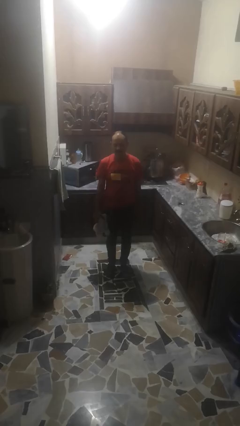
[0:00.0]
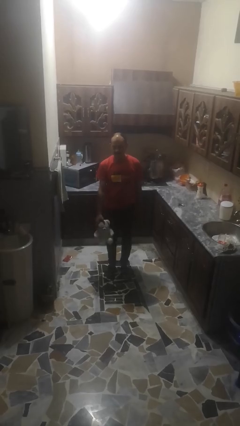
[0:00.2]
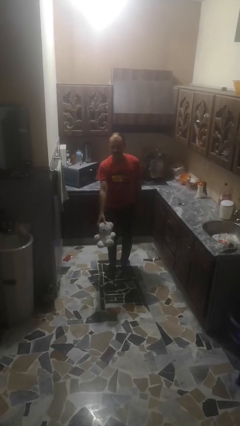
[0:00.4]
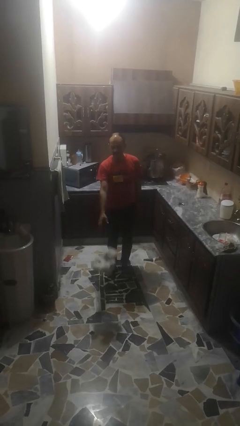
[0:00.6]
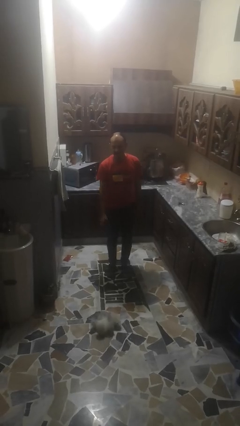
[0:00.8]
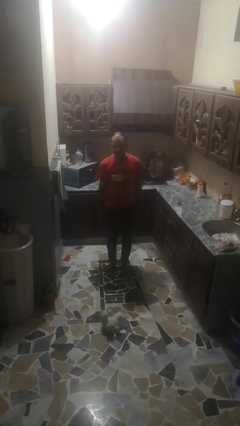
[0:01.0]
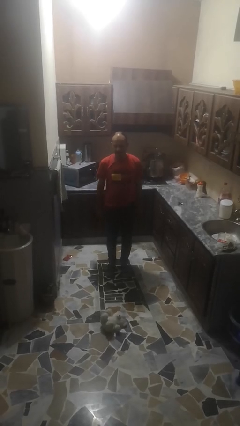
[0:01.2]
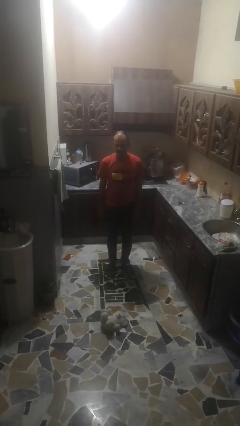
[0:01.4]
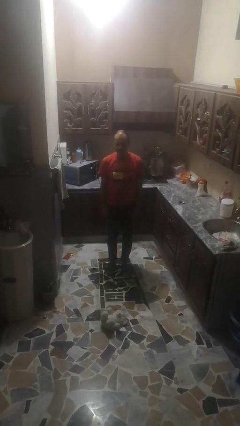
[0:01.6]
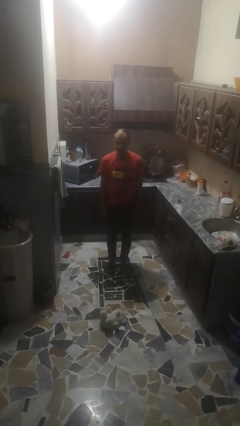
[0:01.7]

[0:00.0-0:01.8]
person throws object to ground

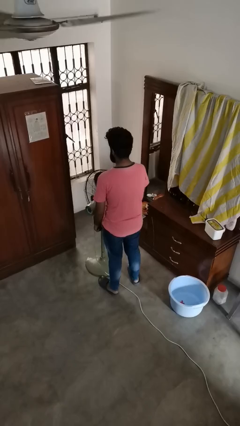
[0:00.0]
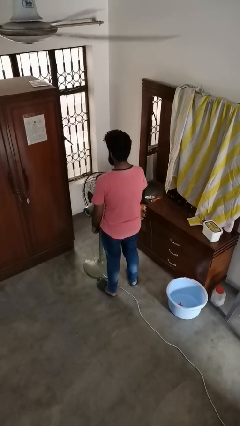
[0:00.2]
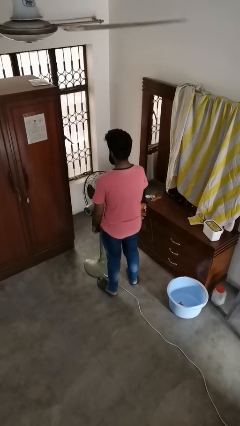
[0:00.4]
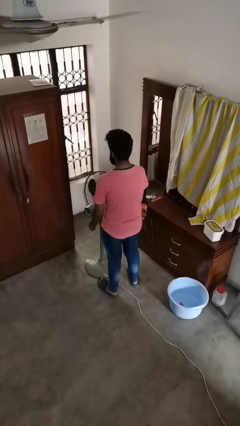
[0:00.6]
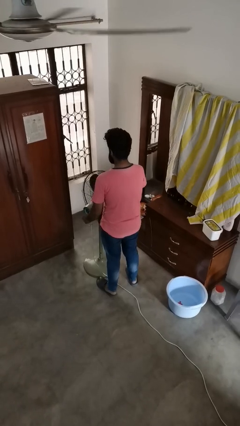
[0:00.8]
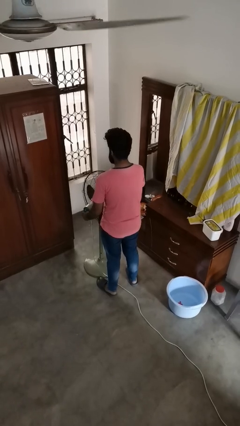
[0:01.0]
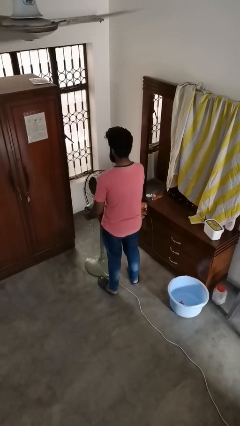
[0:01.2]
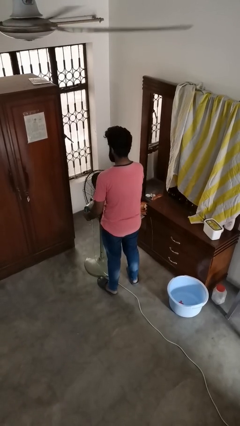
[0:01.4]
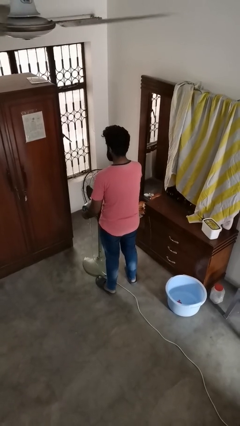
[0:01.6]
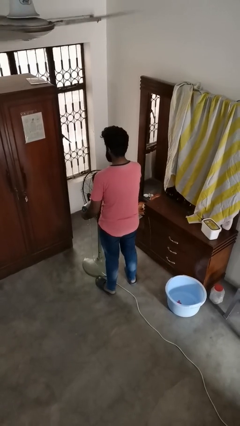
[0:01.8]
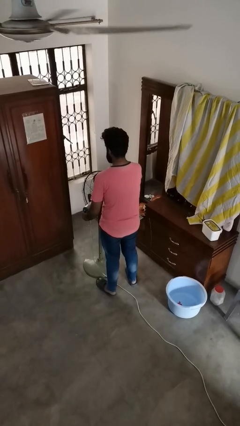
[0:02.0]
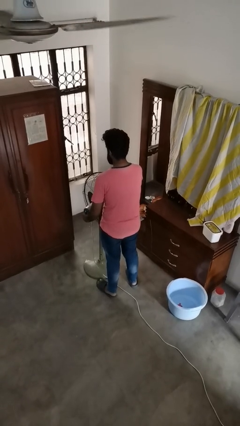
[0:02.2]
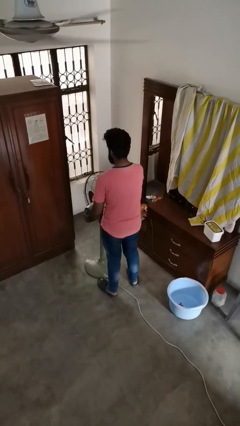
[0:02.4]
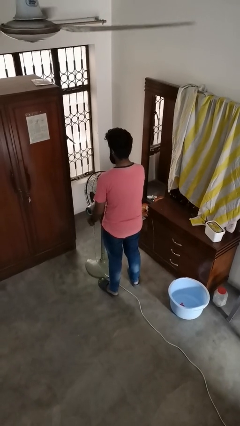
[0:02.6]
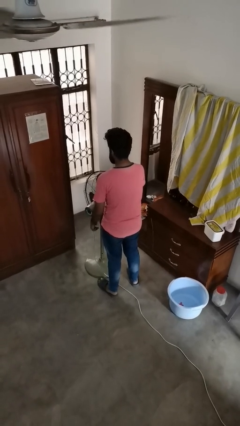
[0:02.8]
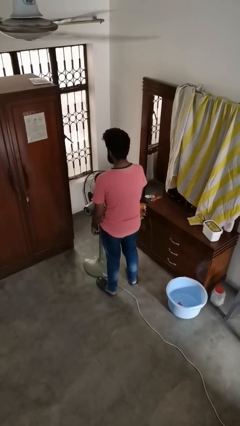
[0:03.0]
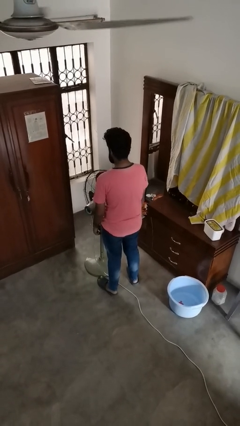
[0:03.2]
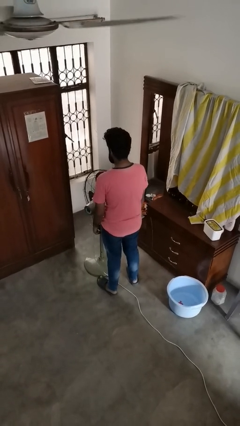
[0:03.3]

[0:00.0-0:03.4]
person turns off fan

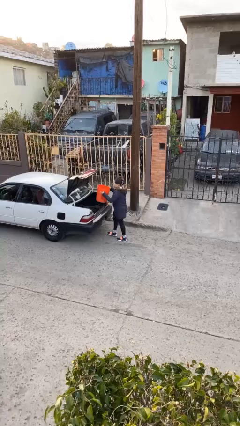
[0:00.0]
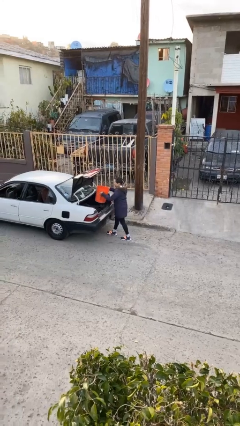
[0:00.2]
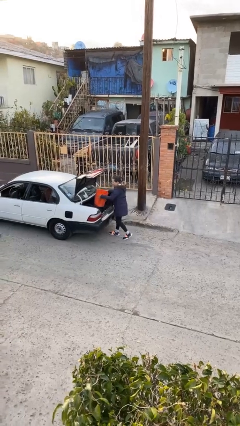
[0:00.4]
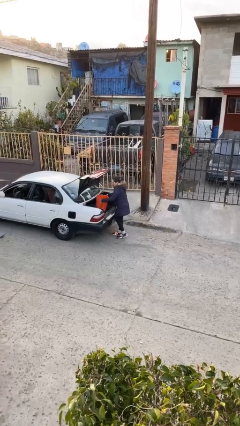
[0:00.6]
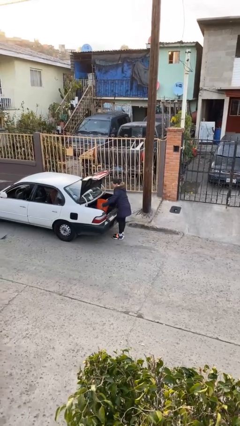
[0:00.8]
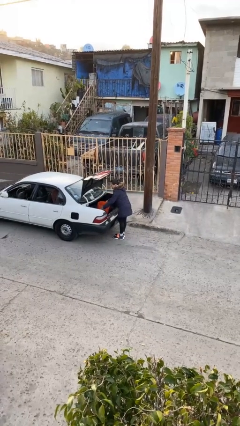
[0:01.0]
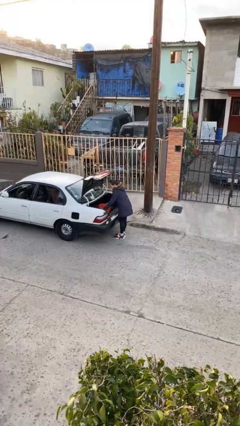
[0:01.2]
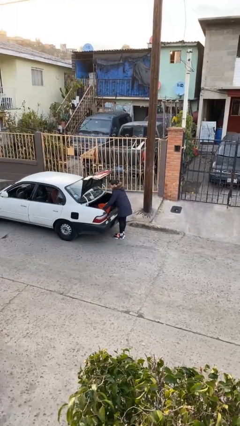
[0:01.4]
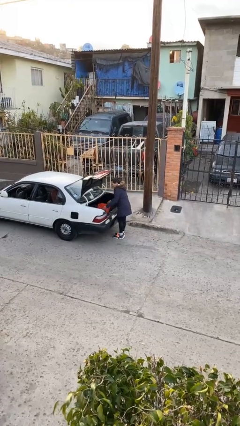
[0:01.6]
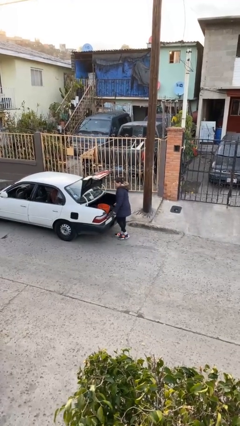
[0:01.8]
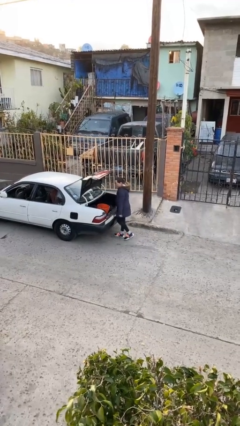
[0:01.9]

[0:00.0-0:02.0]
person loads car

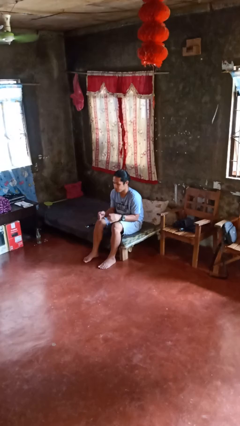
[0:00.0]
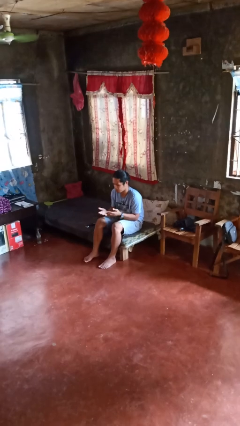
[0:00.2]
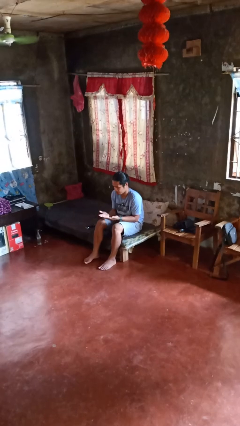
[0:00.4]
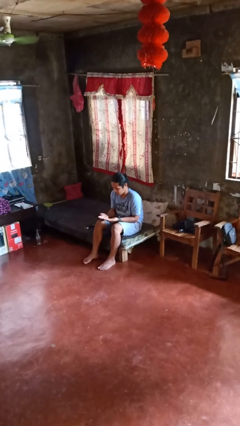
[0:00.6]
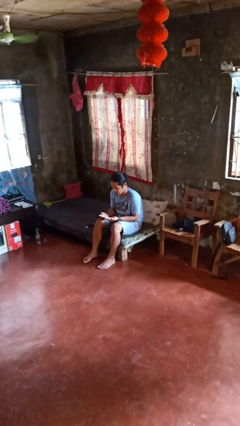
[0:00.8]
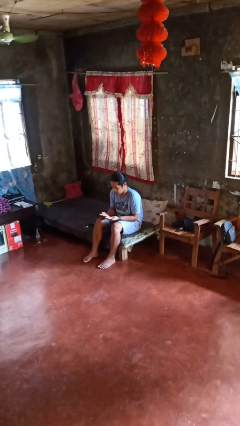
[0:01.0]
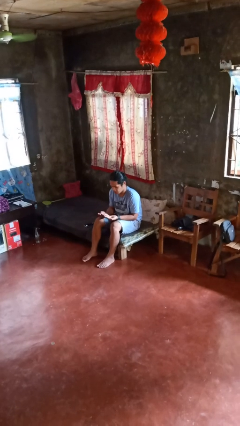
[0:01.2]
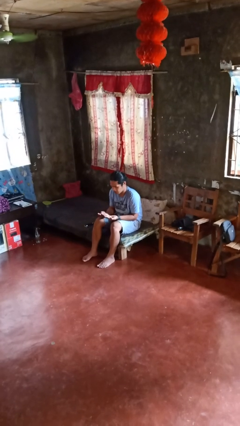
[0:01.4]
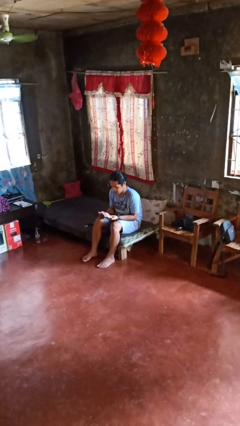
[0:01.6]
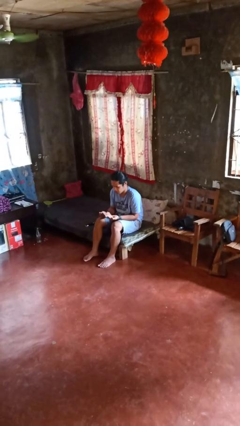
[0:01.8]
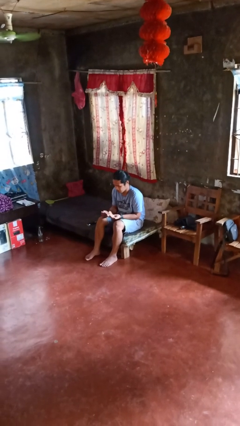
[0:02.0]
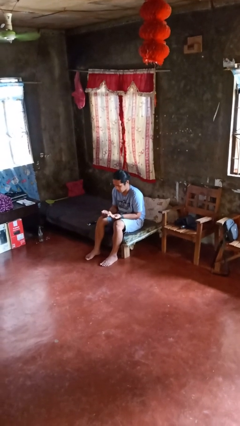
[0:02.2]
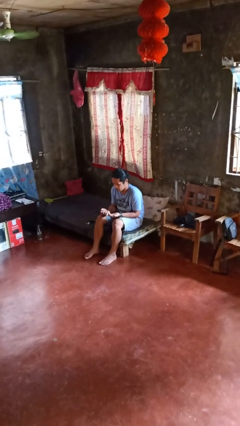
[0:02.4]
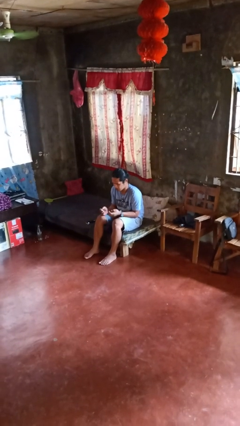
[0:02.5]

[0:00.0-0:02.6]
person looks at hands in lap

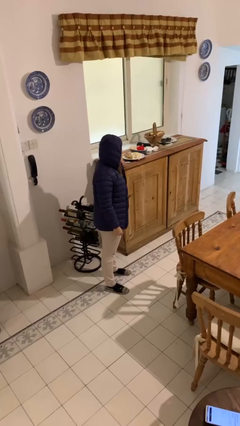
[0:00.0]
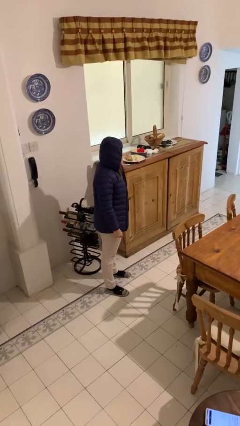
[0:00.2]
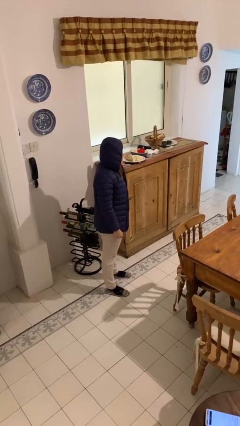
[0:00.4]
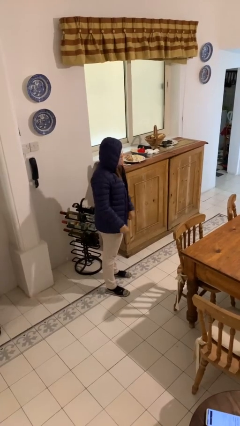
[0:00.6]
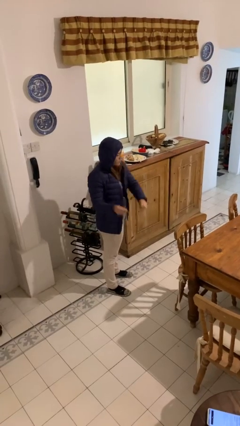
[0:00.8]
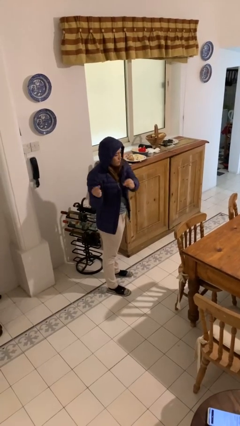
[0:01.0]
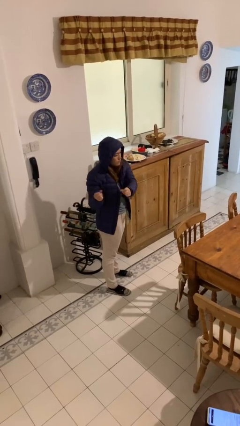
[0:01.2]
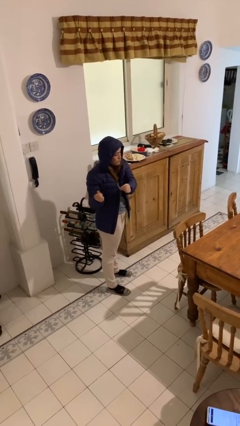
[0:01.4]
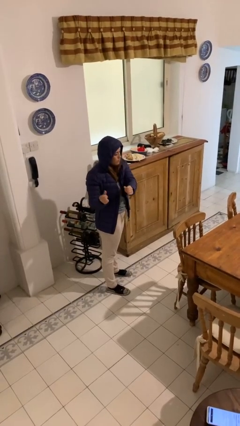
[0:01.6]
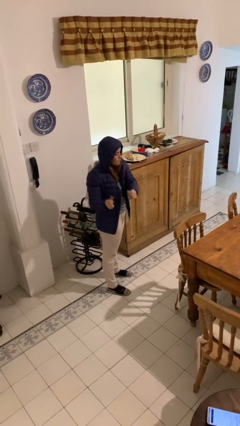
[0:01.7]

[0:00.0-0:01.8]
person snaps fingers

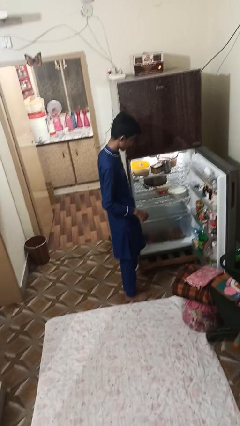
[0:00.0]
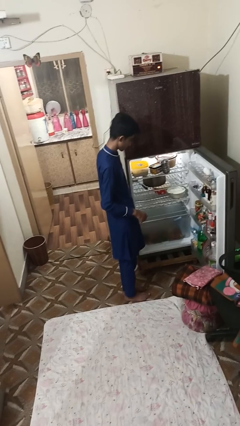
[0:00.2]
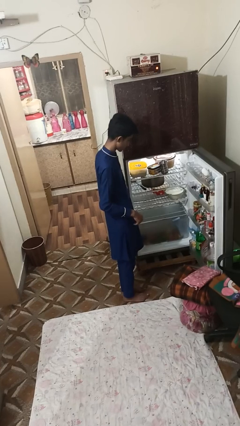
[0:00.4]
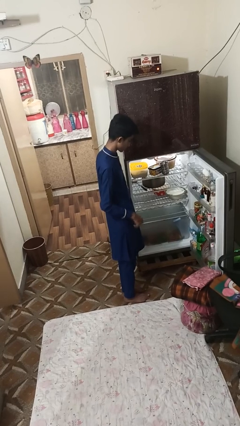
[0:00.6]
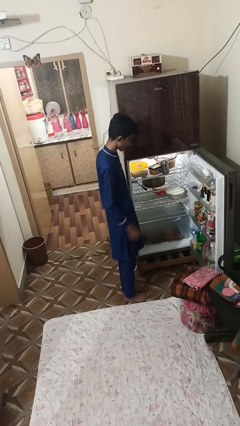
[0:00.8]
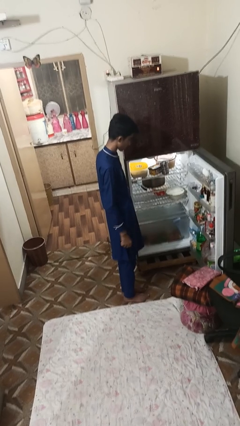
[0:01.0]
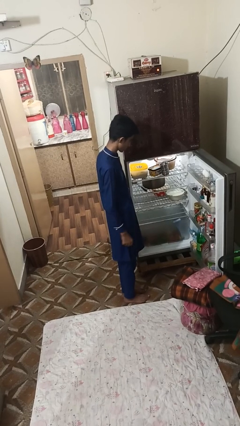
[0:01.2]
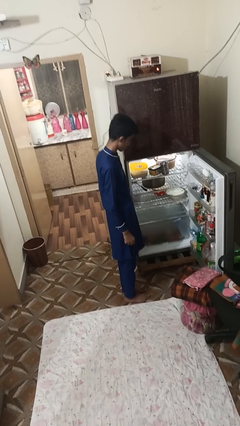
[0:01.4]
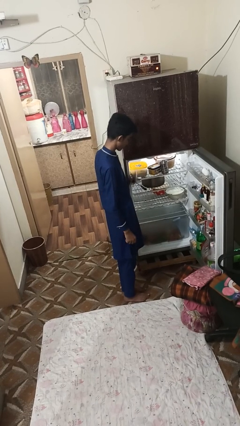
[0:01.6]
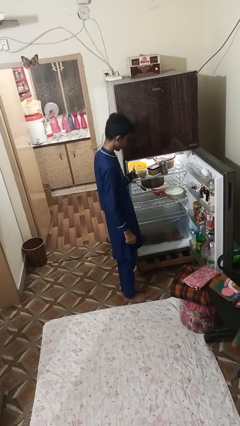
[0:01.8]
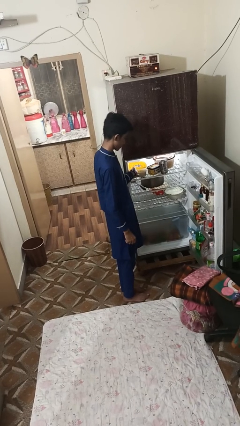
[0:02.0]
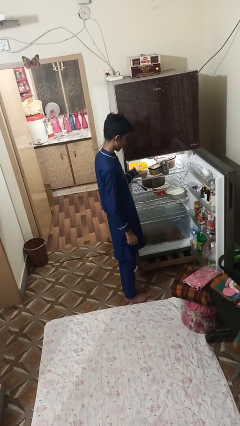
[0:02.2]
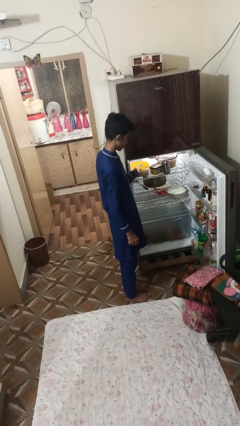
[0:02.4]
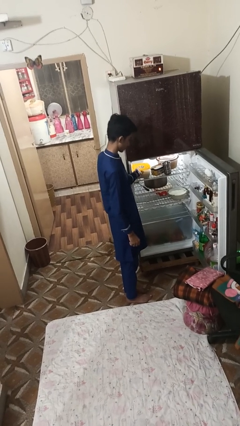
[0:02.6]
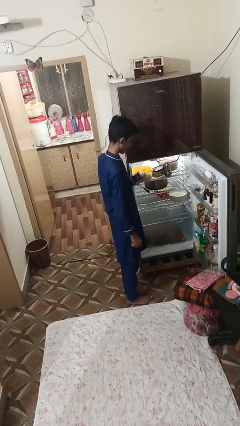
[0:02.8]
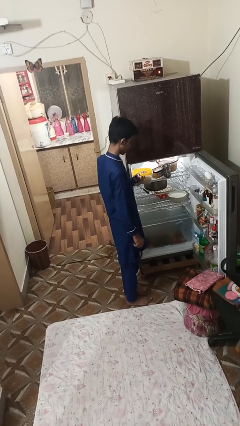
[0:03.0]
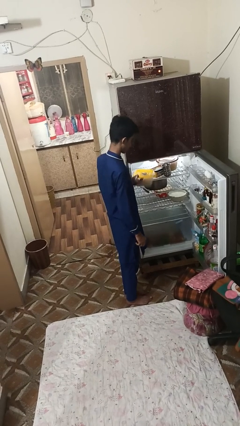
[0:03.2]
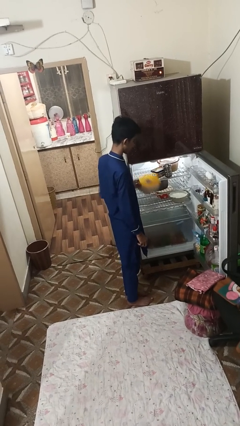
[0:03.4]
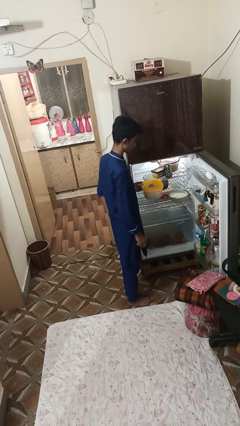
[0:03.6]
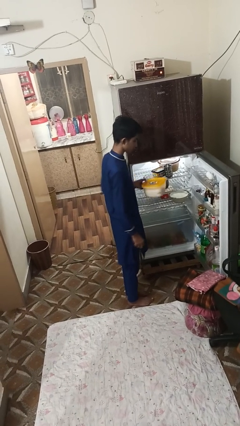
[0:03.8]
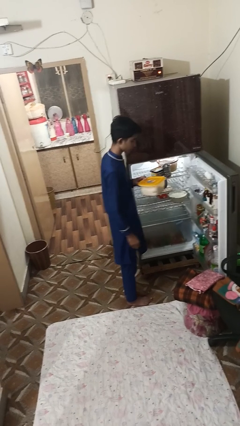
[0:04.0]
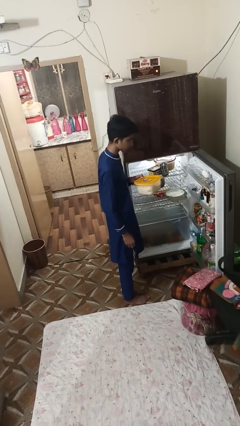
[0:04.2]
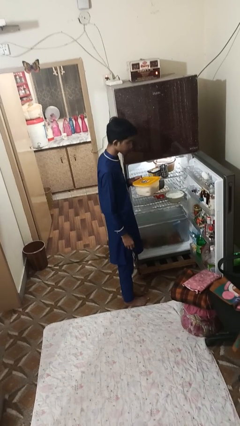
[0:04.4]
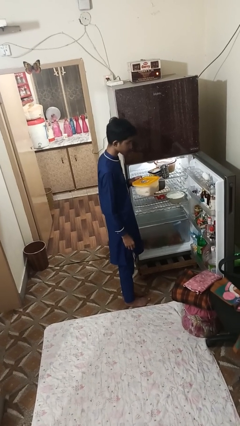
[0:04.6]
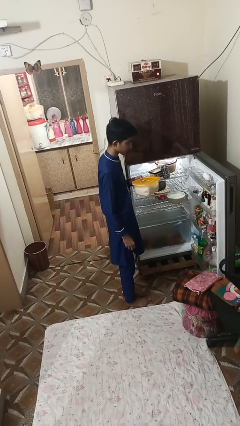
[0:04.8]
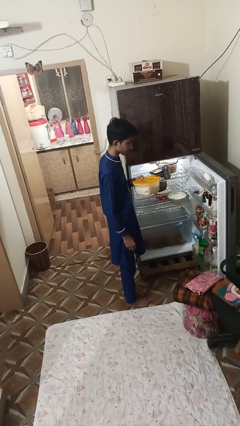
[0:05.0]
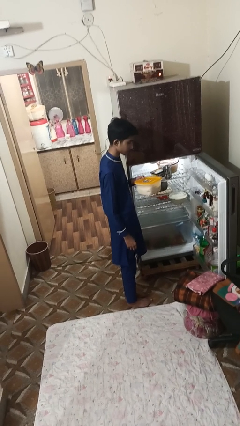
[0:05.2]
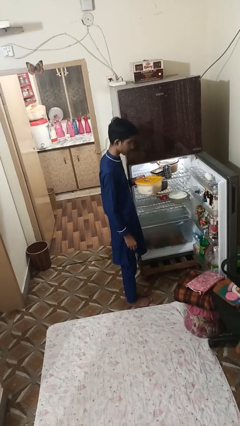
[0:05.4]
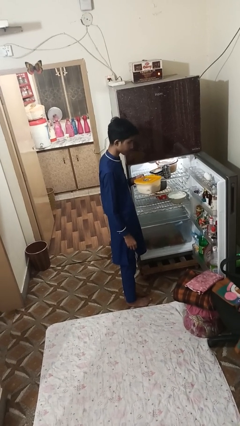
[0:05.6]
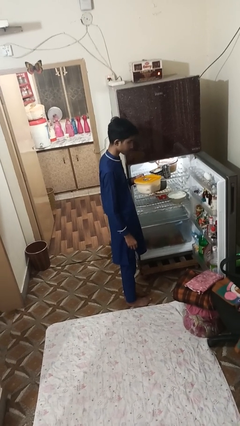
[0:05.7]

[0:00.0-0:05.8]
person takes object from refrigerator
